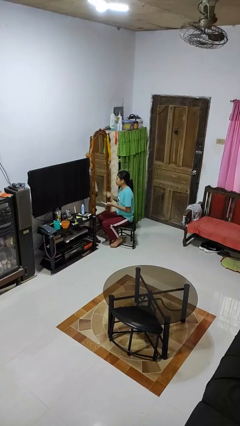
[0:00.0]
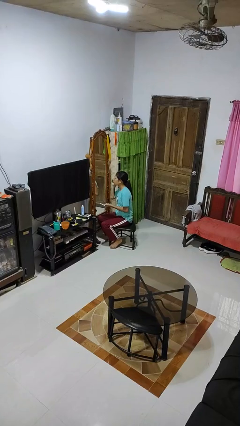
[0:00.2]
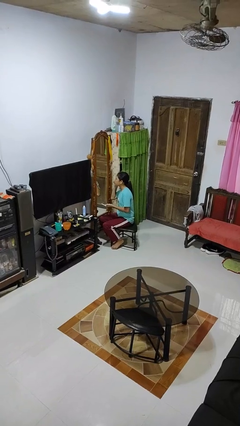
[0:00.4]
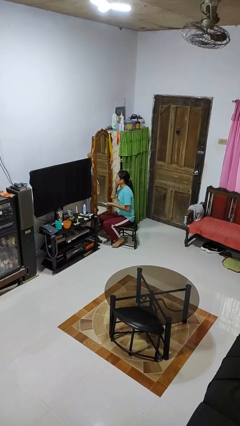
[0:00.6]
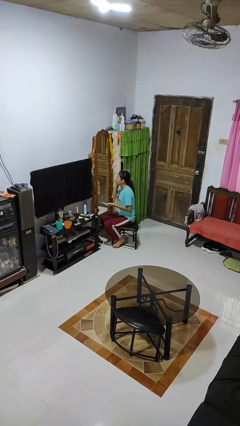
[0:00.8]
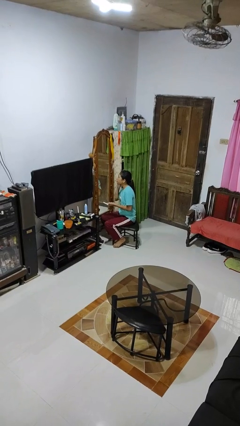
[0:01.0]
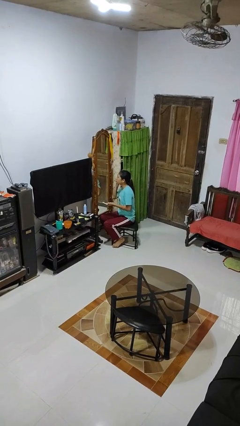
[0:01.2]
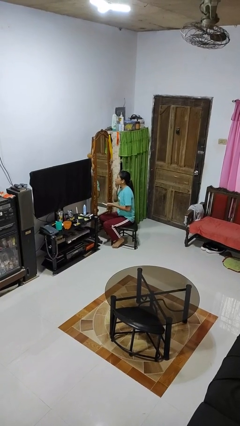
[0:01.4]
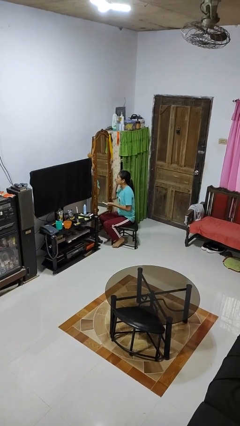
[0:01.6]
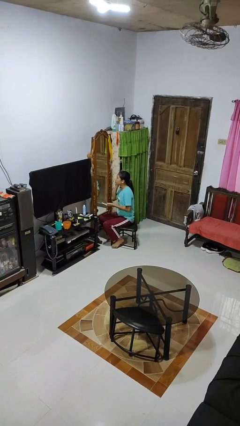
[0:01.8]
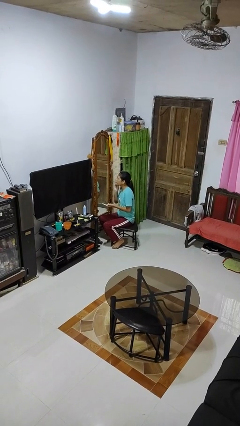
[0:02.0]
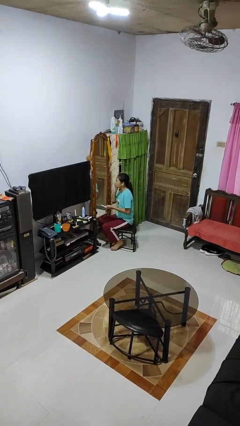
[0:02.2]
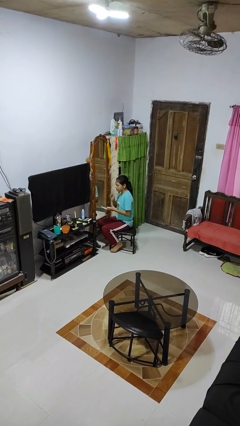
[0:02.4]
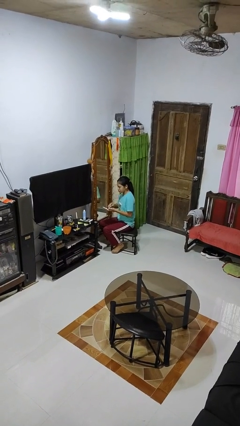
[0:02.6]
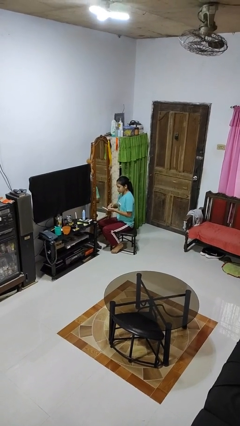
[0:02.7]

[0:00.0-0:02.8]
person applies foundation makeup

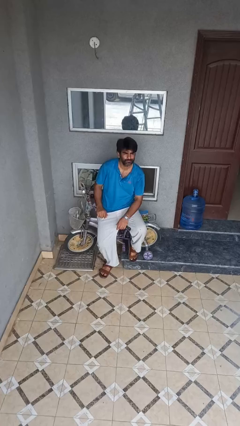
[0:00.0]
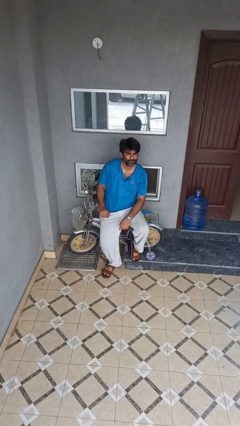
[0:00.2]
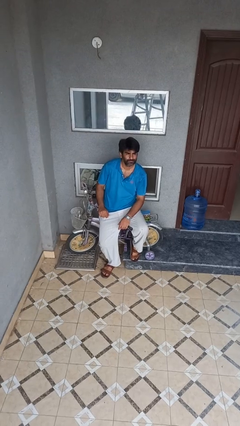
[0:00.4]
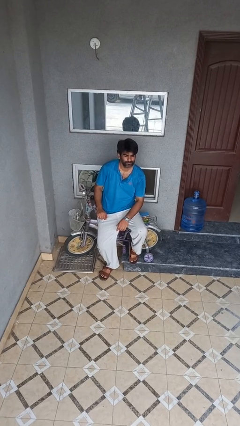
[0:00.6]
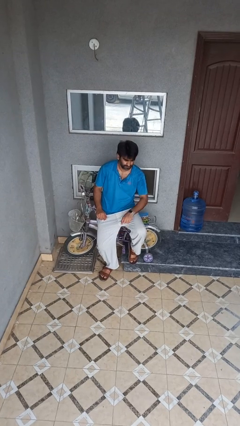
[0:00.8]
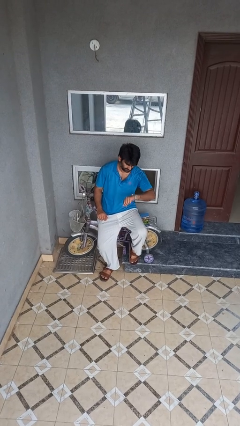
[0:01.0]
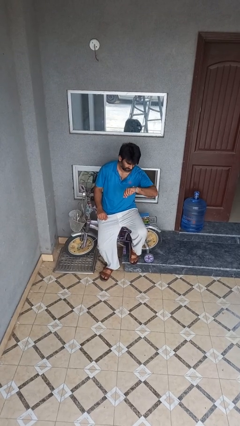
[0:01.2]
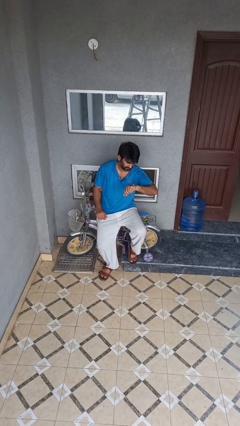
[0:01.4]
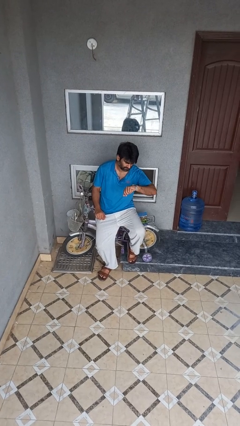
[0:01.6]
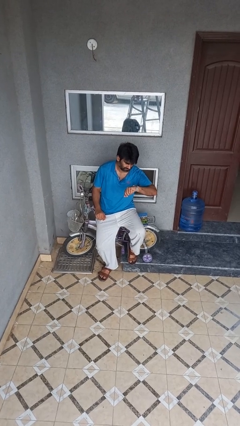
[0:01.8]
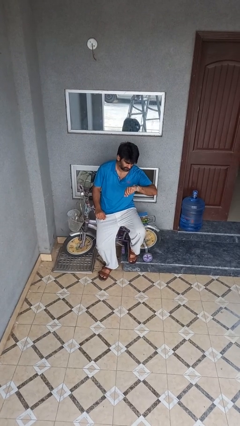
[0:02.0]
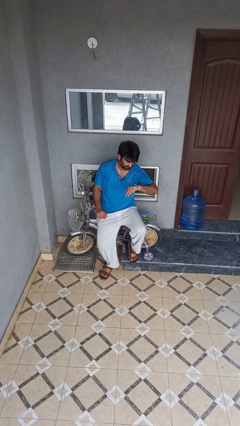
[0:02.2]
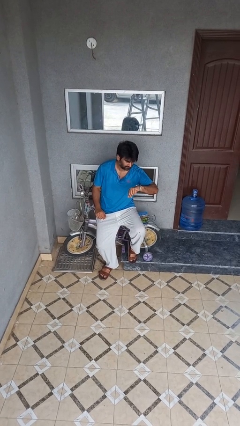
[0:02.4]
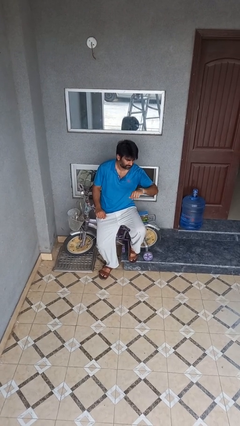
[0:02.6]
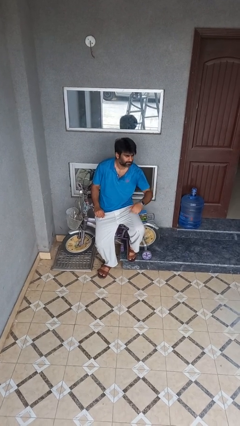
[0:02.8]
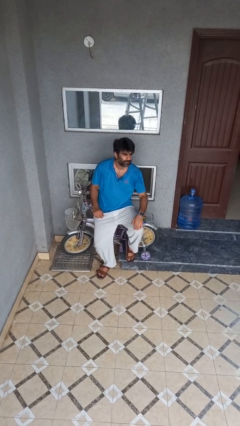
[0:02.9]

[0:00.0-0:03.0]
person looks at wristwatch

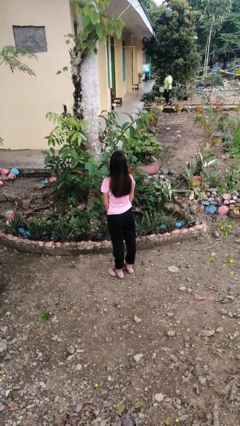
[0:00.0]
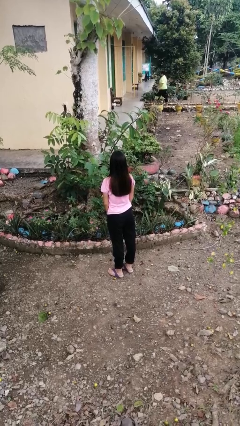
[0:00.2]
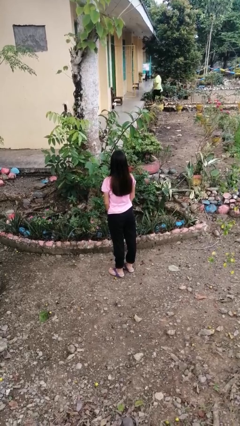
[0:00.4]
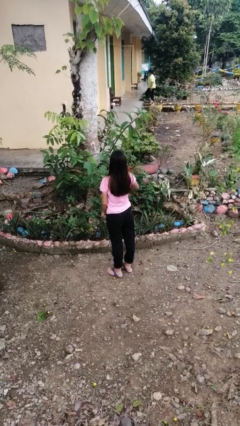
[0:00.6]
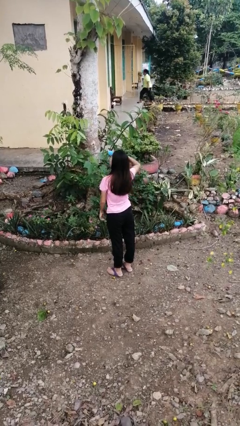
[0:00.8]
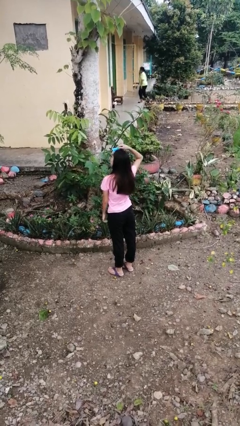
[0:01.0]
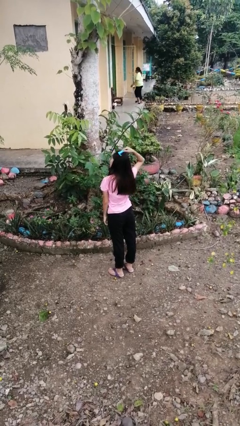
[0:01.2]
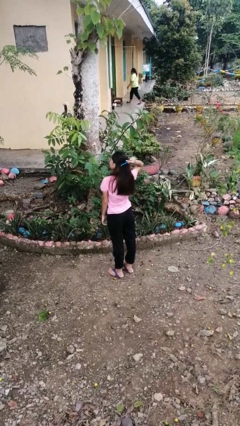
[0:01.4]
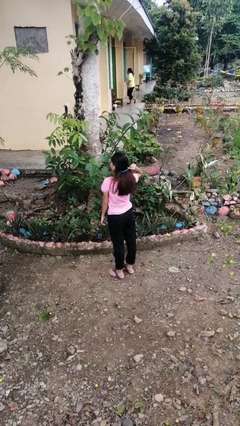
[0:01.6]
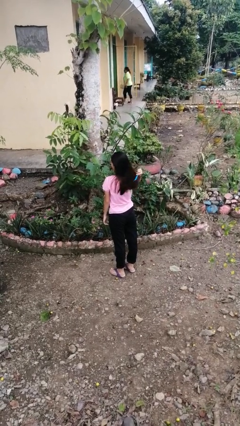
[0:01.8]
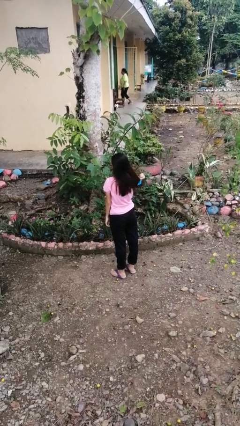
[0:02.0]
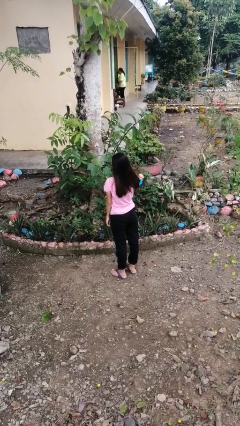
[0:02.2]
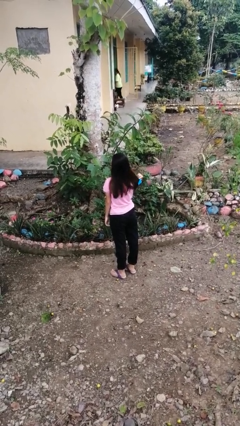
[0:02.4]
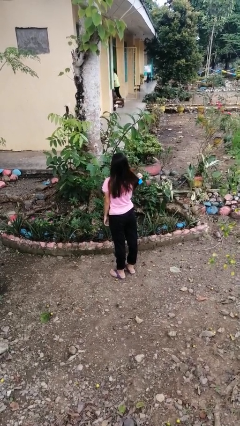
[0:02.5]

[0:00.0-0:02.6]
person brushes hair

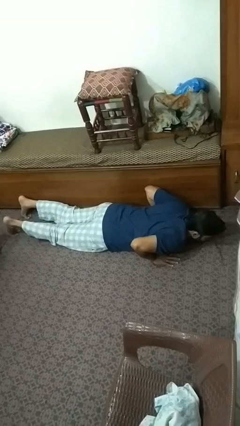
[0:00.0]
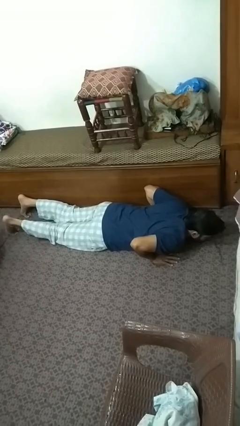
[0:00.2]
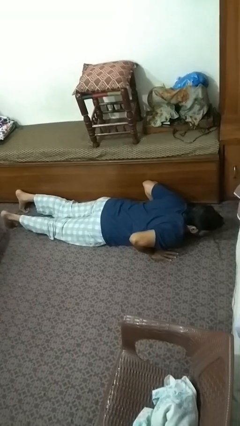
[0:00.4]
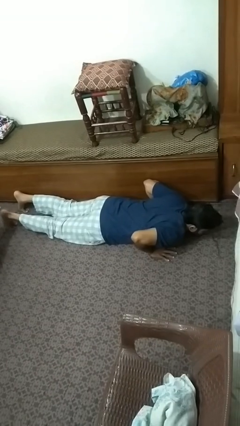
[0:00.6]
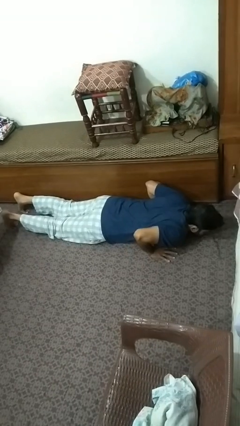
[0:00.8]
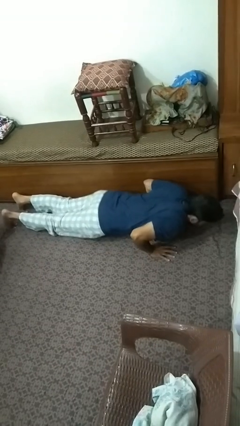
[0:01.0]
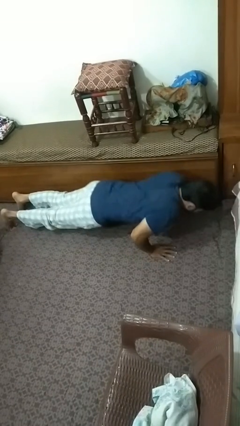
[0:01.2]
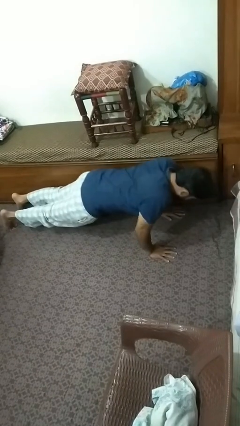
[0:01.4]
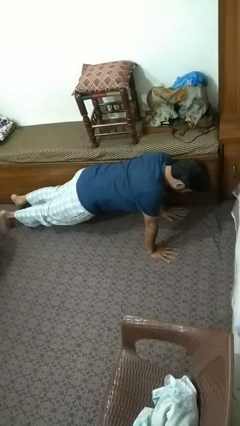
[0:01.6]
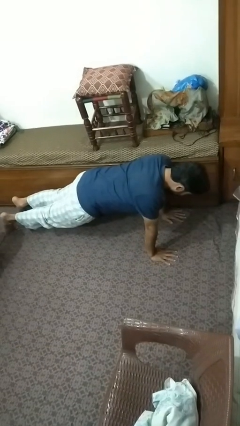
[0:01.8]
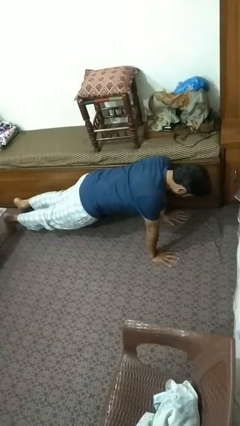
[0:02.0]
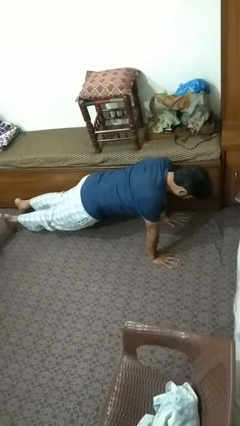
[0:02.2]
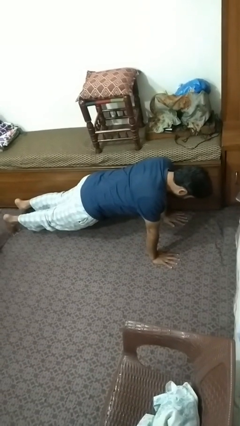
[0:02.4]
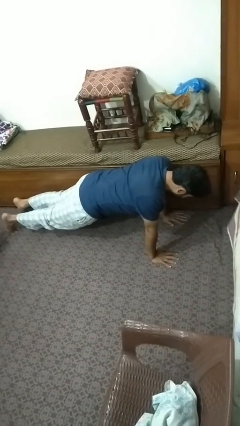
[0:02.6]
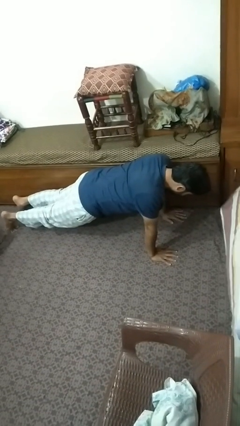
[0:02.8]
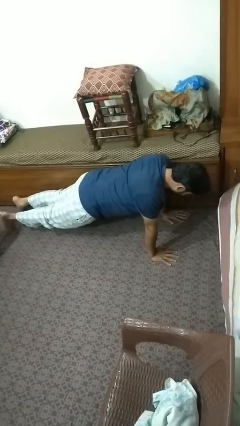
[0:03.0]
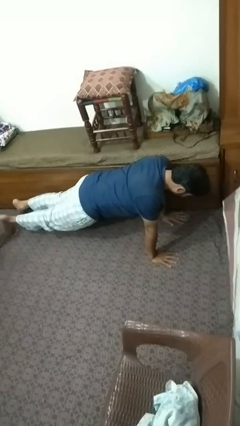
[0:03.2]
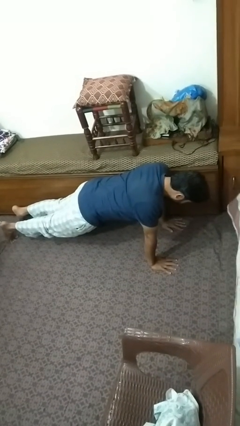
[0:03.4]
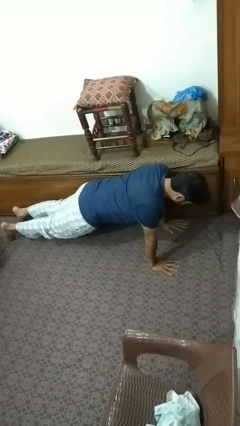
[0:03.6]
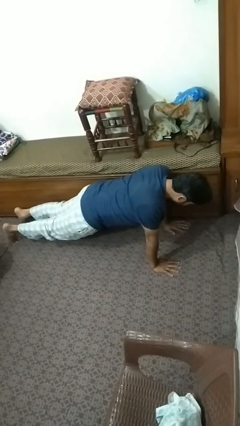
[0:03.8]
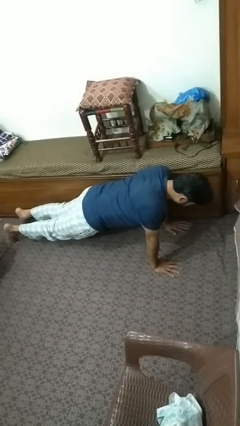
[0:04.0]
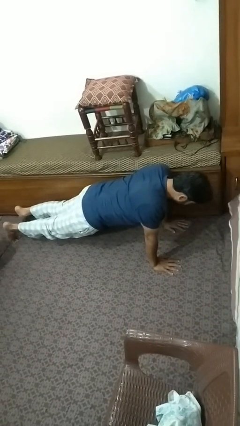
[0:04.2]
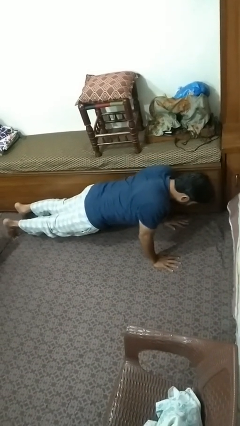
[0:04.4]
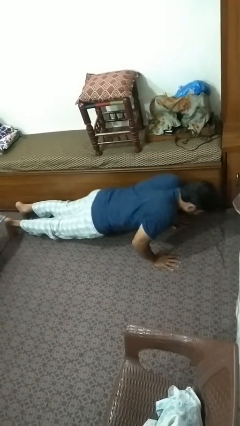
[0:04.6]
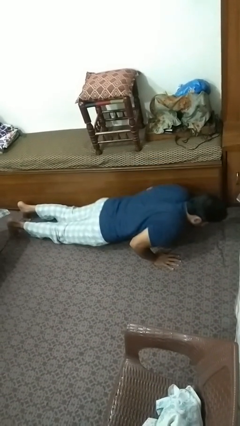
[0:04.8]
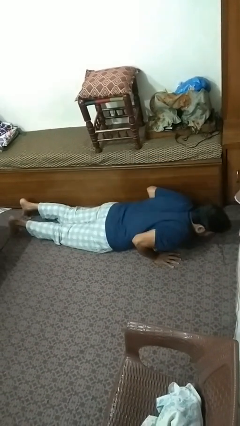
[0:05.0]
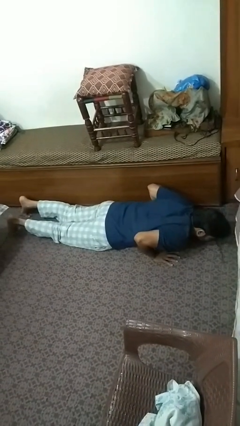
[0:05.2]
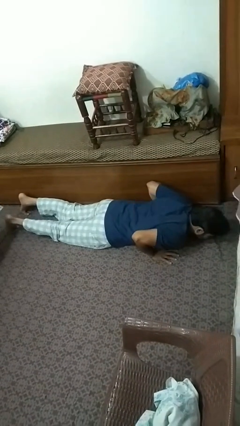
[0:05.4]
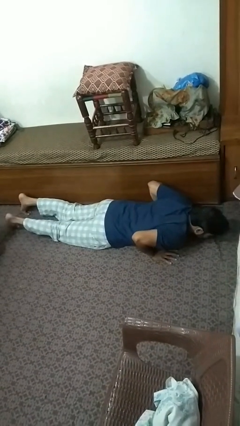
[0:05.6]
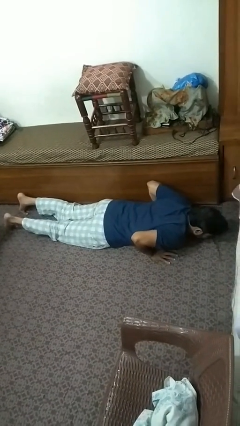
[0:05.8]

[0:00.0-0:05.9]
person exercises with pushup

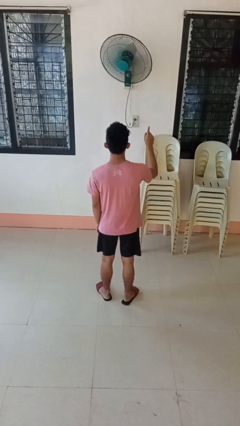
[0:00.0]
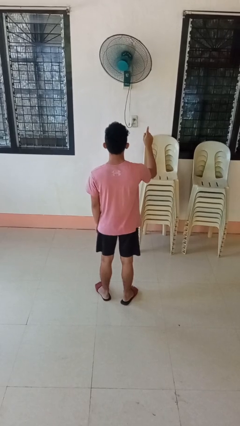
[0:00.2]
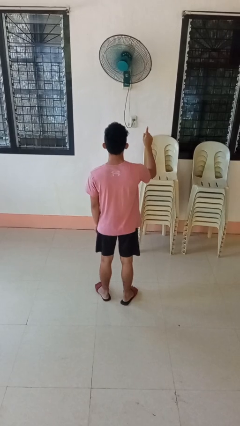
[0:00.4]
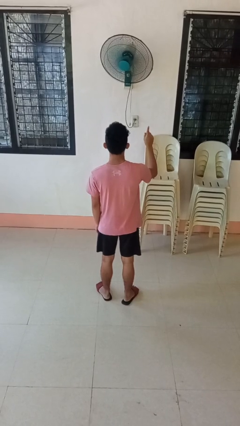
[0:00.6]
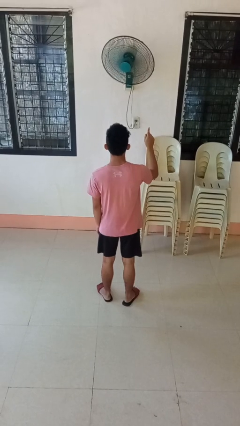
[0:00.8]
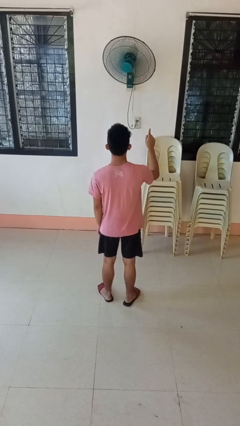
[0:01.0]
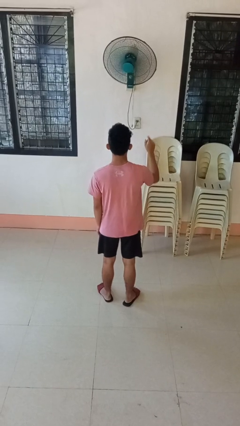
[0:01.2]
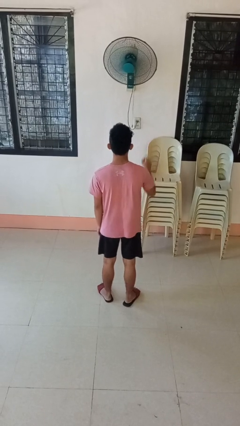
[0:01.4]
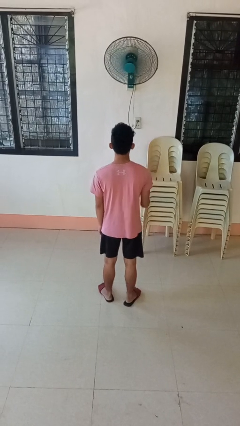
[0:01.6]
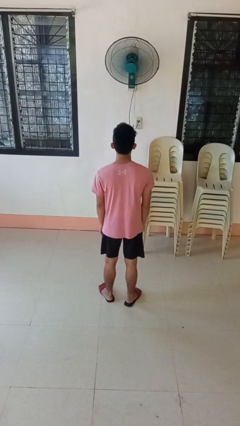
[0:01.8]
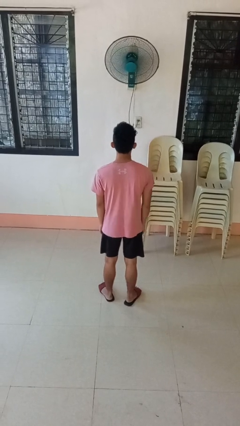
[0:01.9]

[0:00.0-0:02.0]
person gestures number one

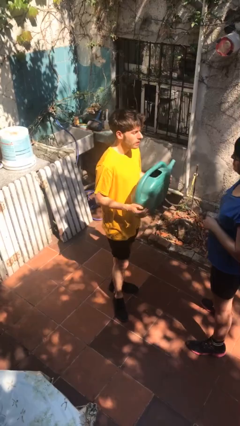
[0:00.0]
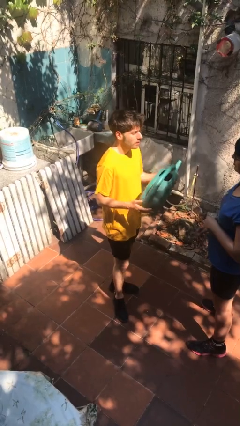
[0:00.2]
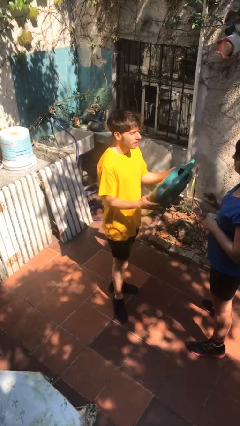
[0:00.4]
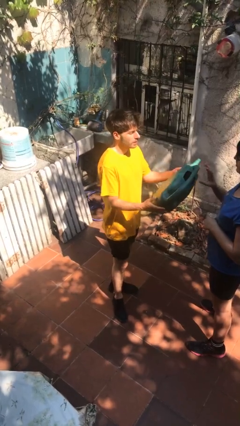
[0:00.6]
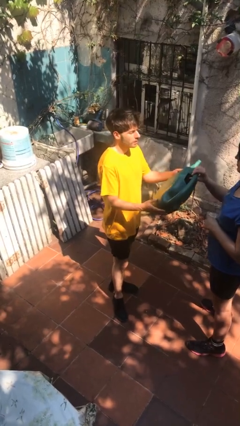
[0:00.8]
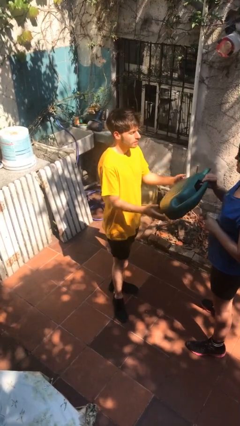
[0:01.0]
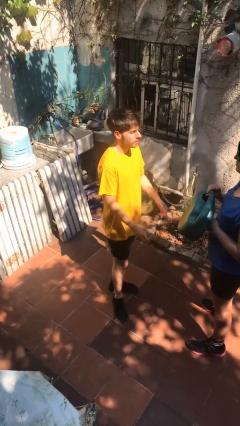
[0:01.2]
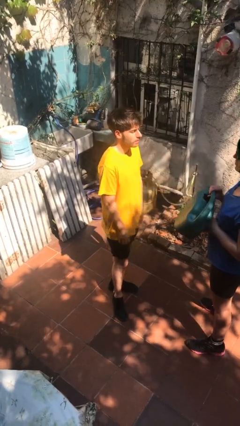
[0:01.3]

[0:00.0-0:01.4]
person transfers object to person
